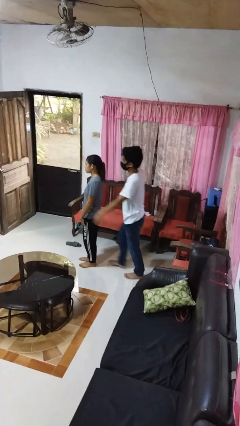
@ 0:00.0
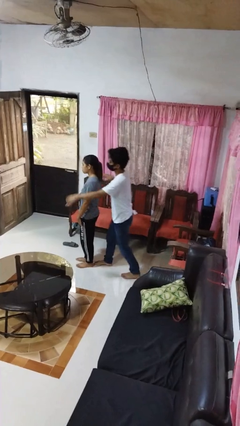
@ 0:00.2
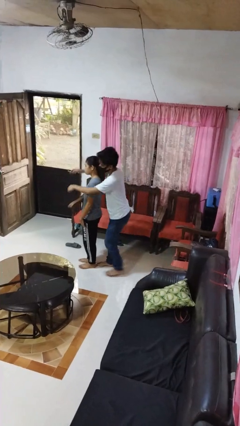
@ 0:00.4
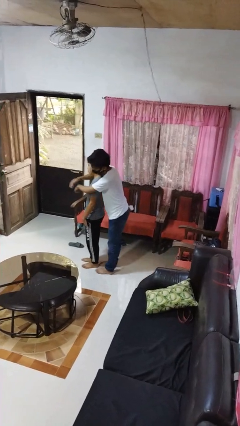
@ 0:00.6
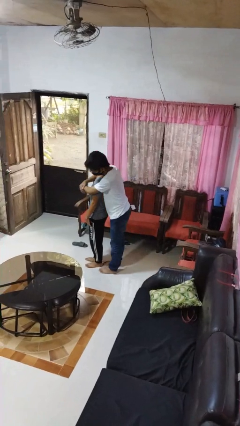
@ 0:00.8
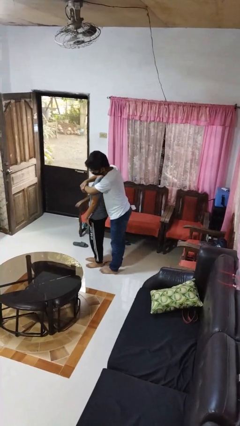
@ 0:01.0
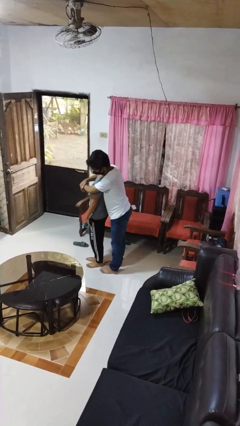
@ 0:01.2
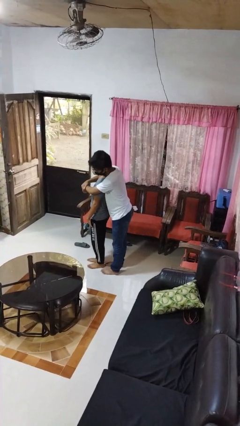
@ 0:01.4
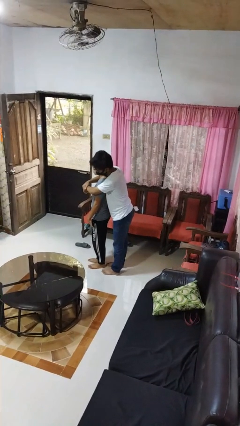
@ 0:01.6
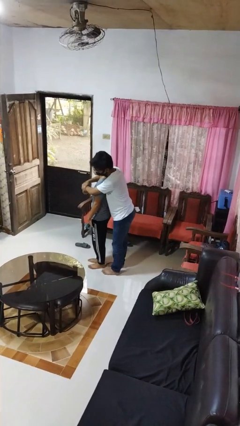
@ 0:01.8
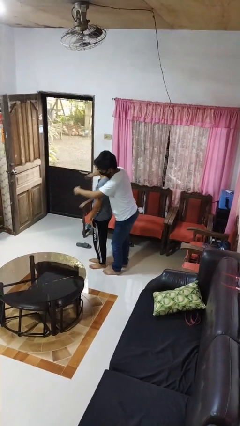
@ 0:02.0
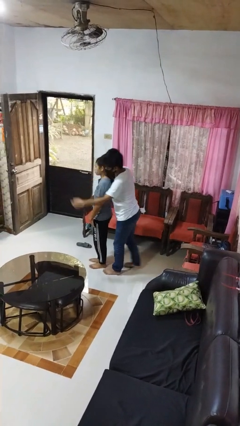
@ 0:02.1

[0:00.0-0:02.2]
person hugs person from behind

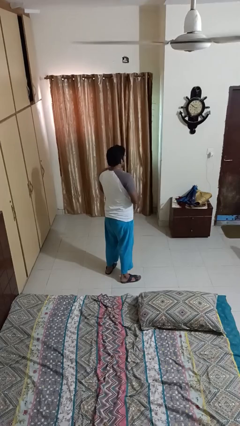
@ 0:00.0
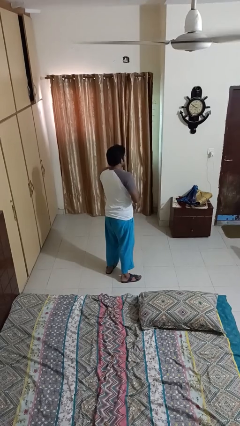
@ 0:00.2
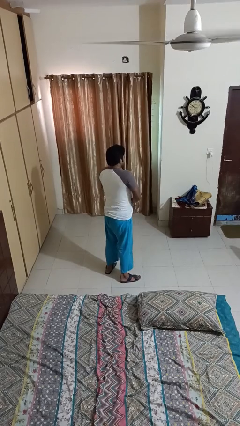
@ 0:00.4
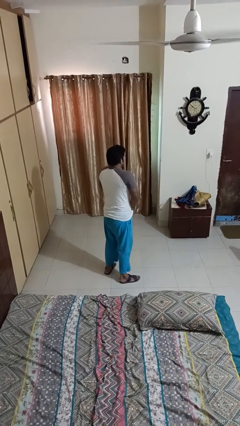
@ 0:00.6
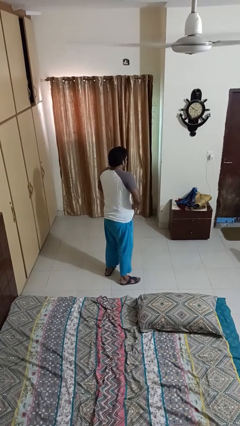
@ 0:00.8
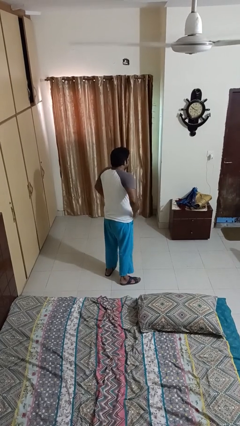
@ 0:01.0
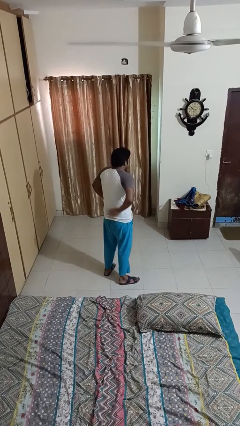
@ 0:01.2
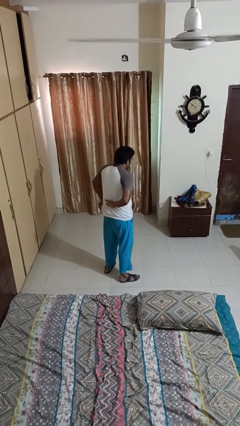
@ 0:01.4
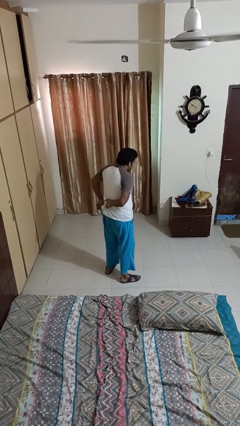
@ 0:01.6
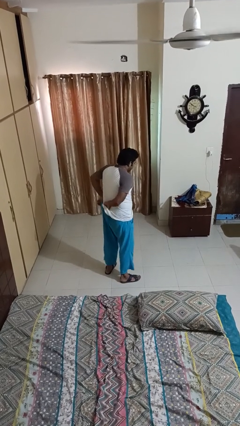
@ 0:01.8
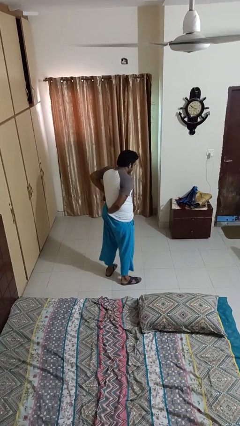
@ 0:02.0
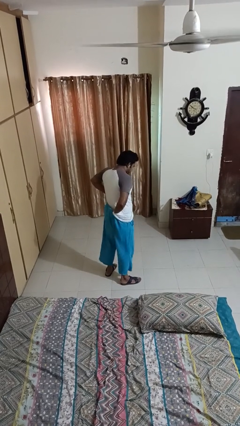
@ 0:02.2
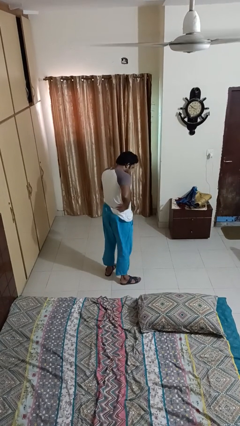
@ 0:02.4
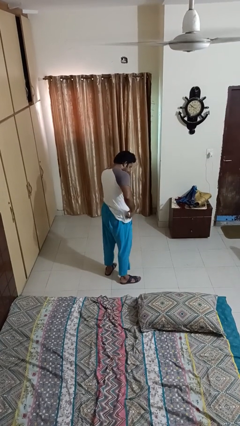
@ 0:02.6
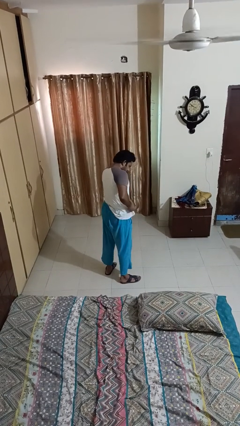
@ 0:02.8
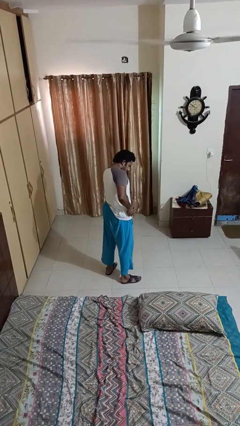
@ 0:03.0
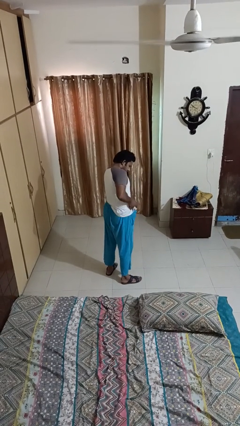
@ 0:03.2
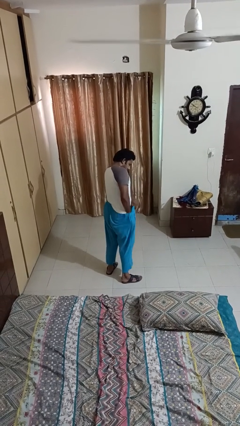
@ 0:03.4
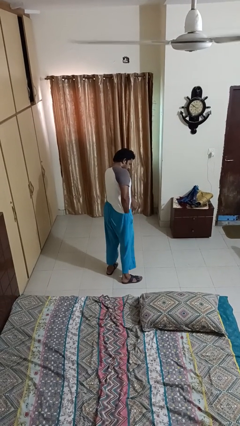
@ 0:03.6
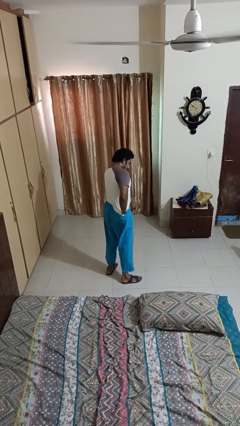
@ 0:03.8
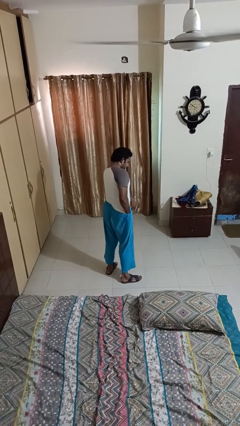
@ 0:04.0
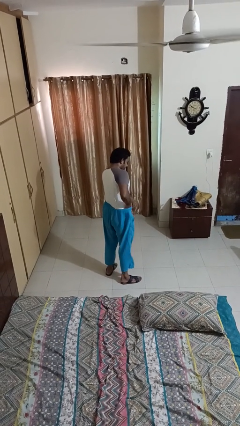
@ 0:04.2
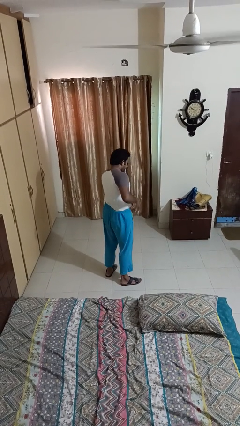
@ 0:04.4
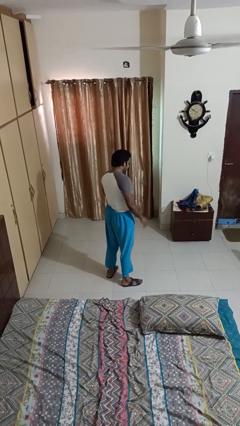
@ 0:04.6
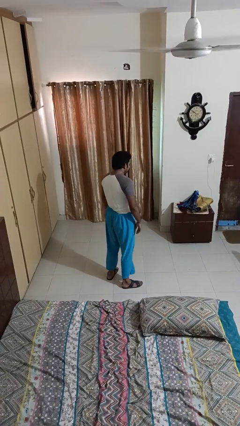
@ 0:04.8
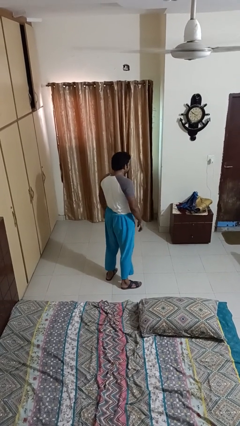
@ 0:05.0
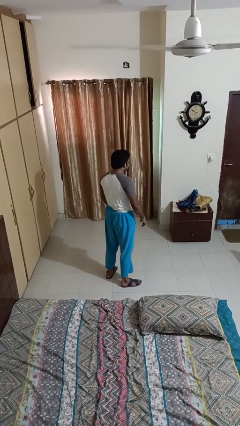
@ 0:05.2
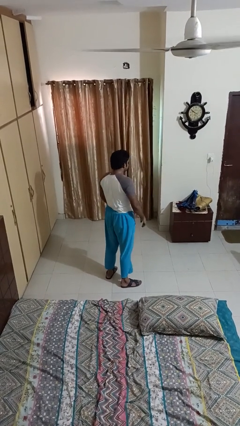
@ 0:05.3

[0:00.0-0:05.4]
person tucks in shirt

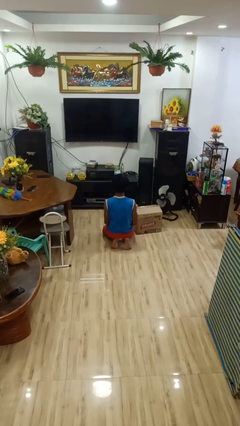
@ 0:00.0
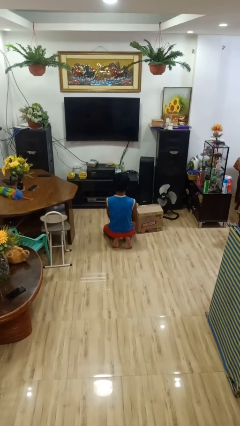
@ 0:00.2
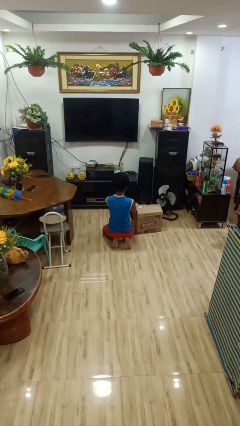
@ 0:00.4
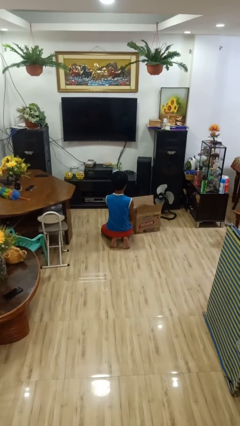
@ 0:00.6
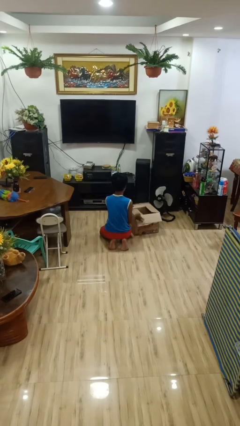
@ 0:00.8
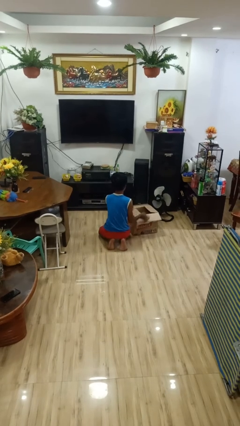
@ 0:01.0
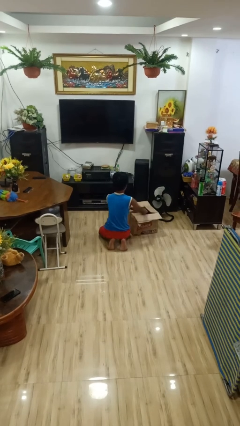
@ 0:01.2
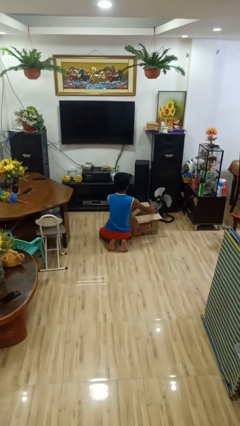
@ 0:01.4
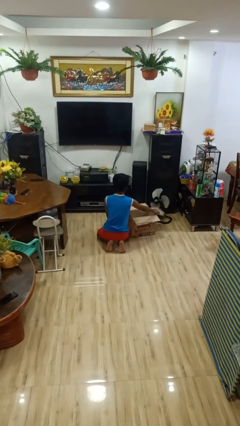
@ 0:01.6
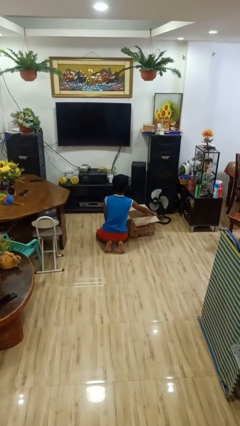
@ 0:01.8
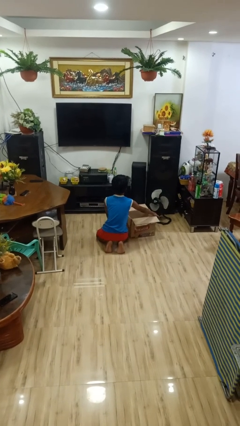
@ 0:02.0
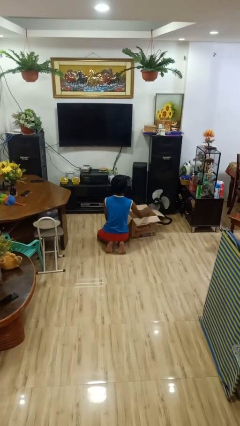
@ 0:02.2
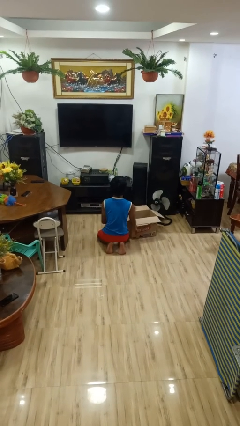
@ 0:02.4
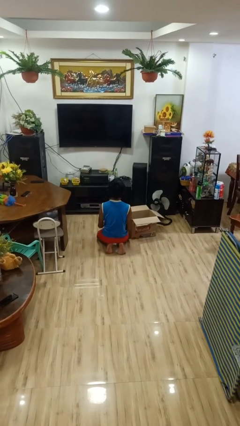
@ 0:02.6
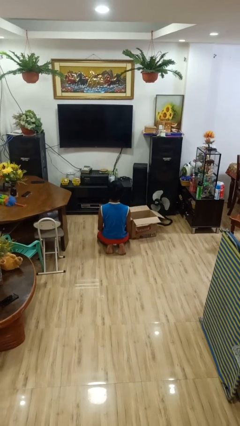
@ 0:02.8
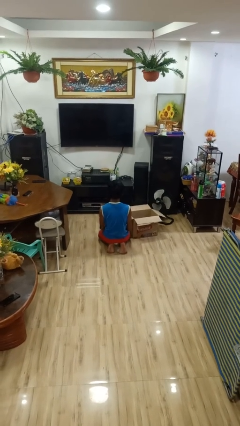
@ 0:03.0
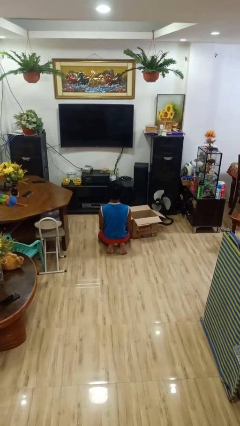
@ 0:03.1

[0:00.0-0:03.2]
person opens box

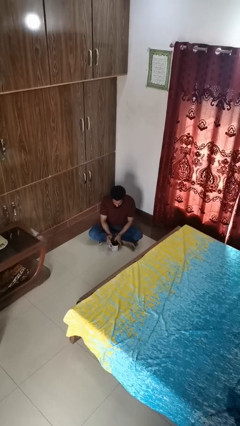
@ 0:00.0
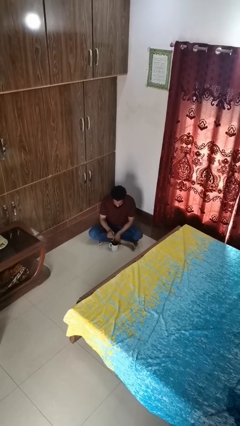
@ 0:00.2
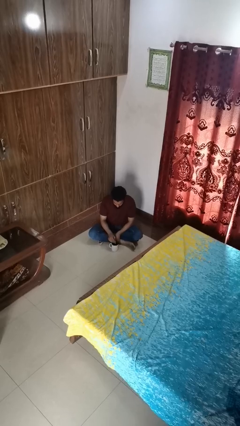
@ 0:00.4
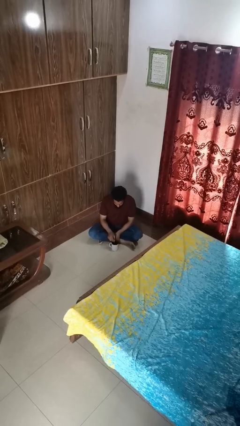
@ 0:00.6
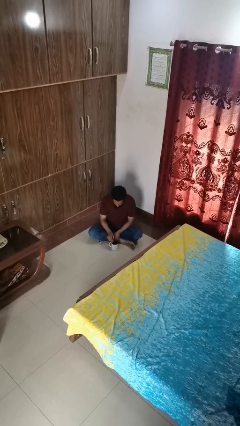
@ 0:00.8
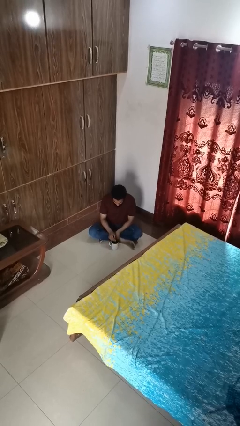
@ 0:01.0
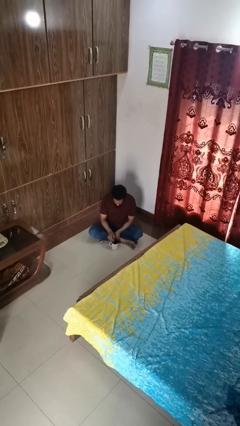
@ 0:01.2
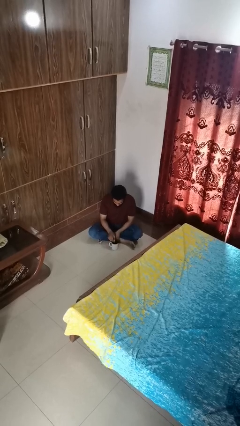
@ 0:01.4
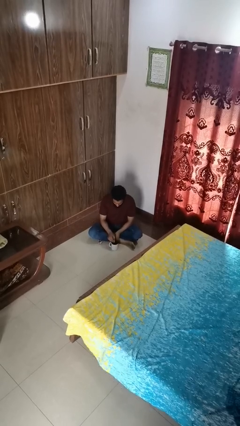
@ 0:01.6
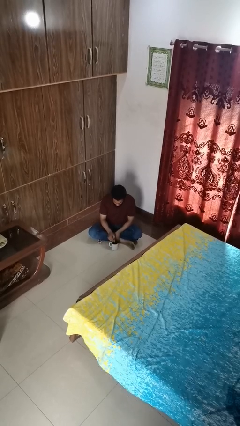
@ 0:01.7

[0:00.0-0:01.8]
person stirs mug

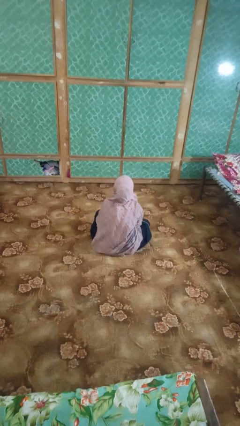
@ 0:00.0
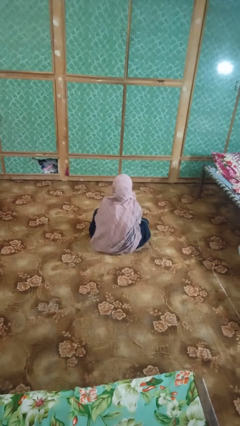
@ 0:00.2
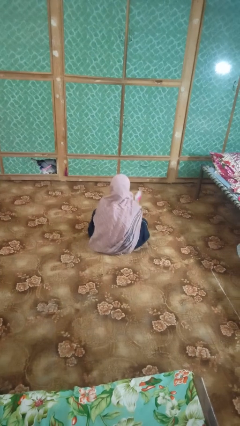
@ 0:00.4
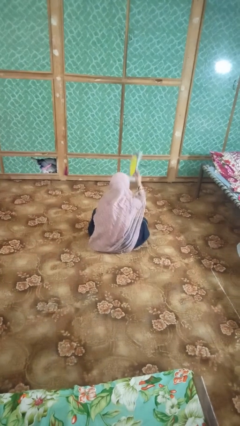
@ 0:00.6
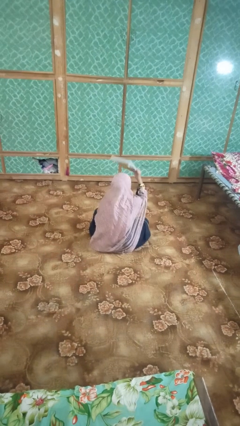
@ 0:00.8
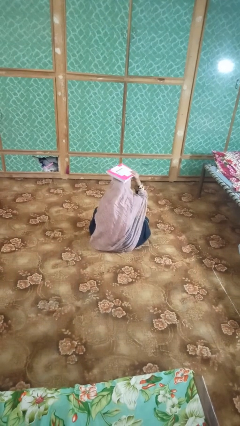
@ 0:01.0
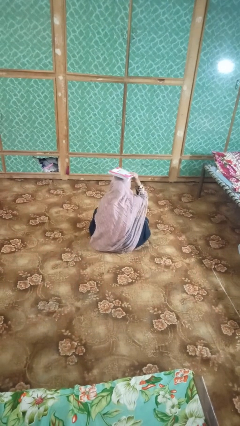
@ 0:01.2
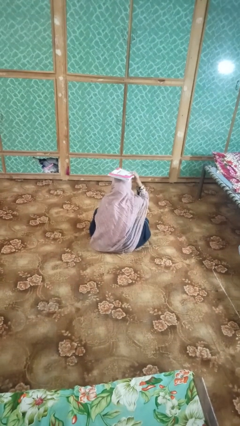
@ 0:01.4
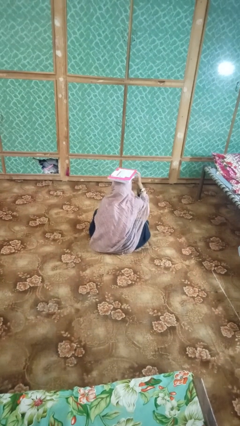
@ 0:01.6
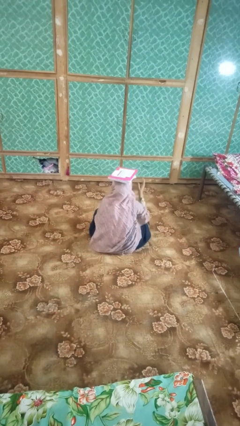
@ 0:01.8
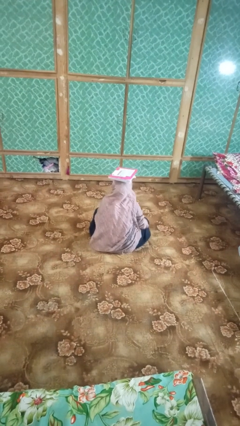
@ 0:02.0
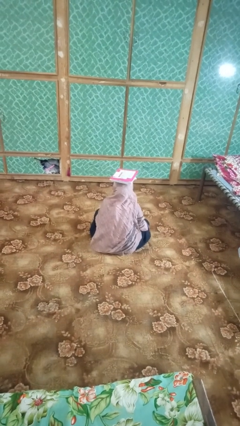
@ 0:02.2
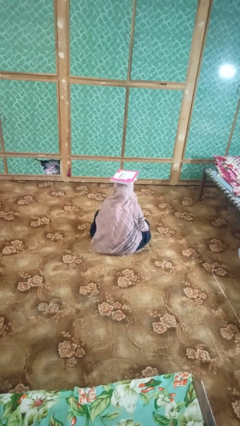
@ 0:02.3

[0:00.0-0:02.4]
person holds object above head

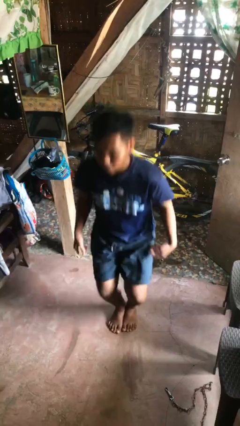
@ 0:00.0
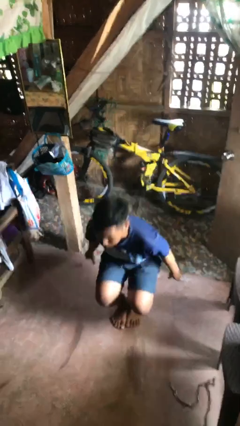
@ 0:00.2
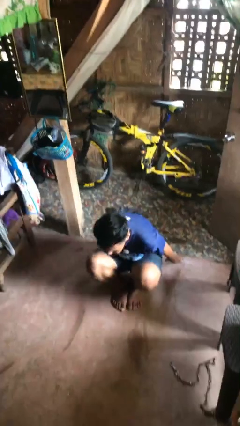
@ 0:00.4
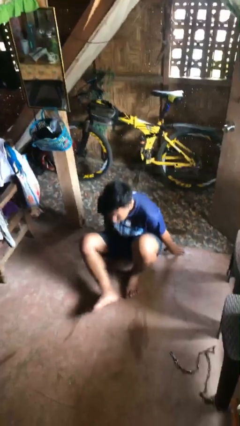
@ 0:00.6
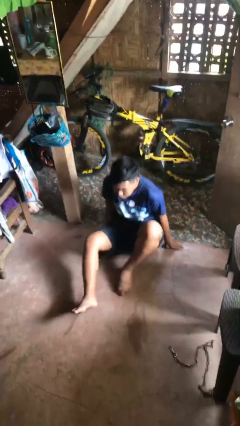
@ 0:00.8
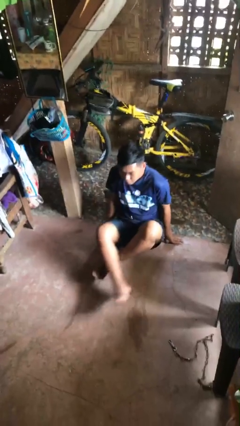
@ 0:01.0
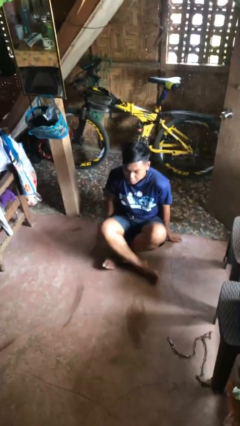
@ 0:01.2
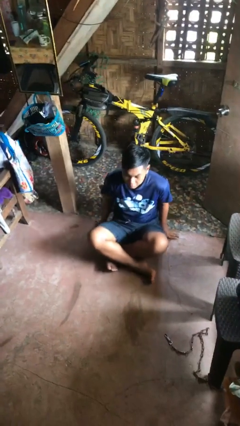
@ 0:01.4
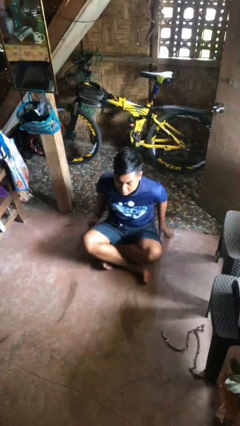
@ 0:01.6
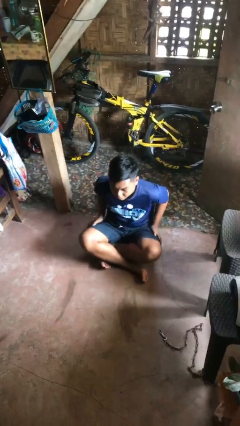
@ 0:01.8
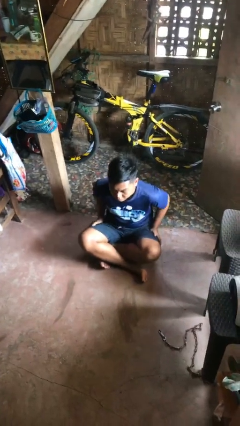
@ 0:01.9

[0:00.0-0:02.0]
person sits crisscross
